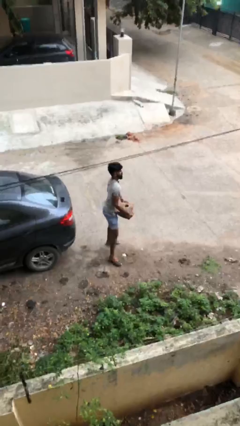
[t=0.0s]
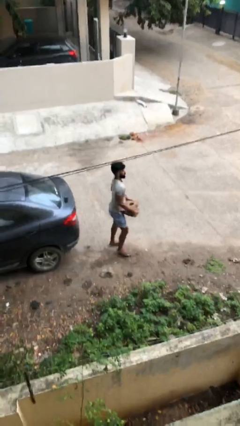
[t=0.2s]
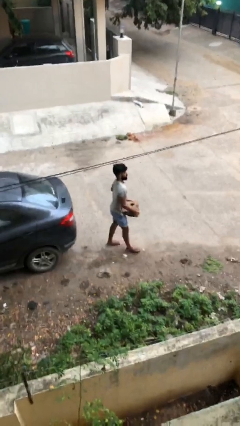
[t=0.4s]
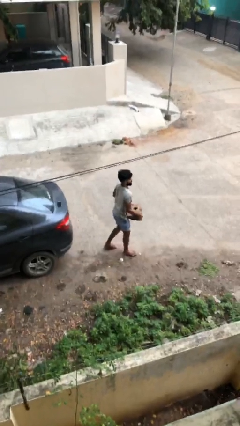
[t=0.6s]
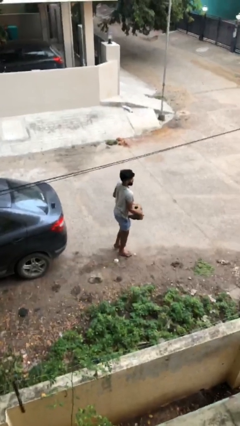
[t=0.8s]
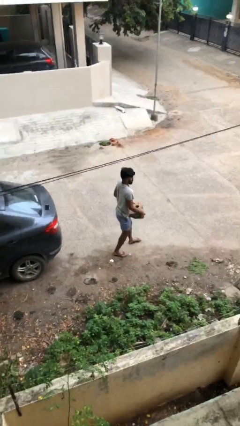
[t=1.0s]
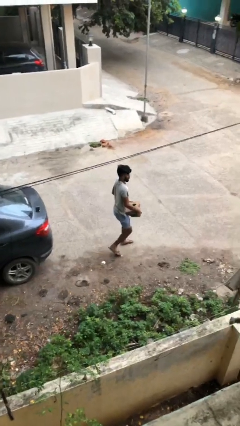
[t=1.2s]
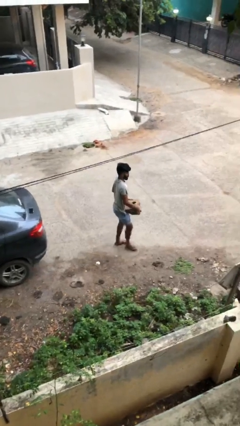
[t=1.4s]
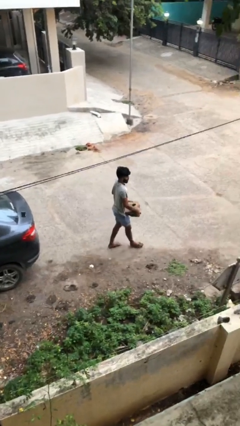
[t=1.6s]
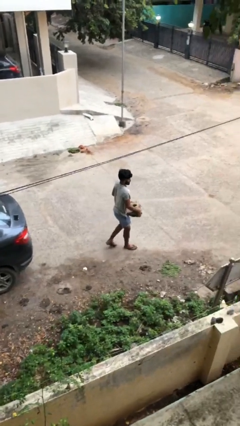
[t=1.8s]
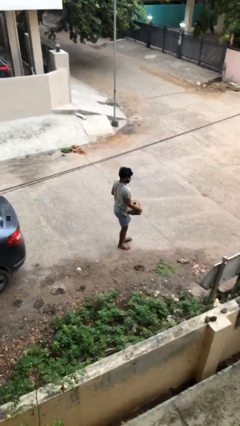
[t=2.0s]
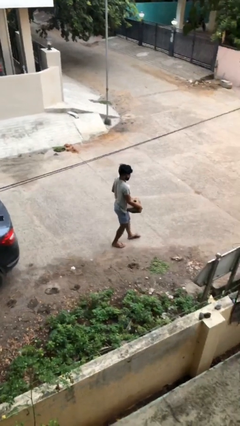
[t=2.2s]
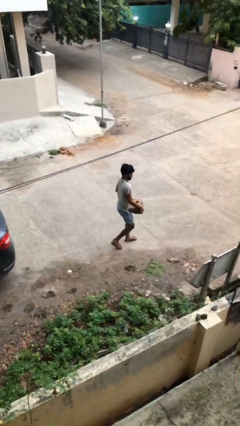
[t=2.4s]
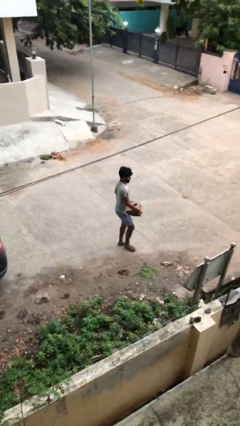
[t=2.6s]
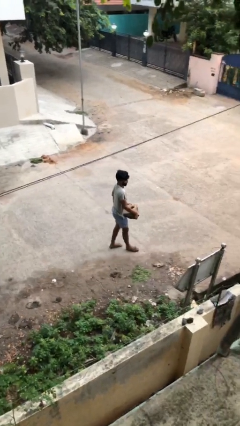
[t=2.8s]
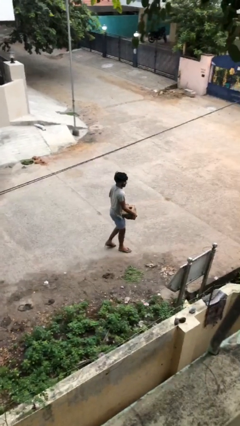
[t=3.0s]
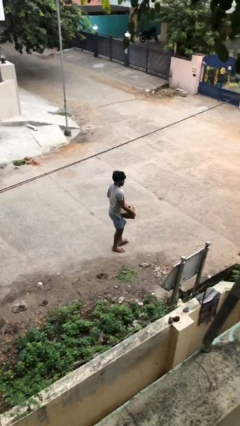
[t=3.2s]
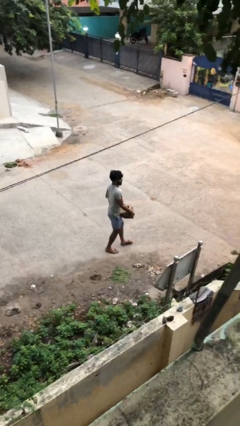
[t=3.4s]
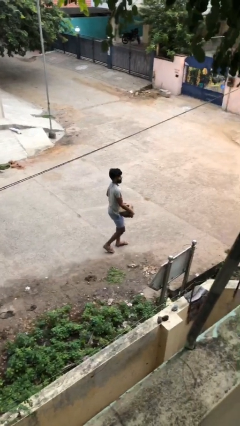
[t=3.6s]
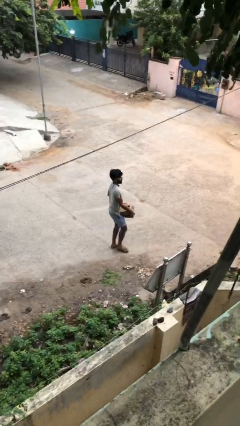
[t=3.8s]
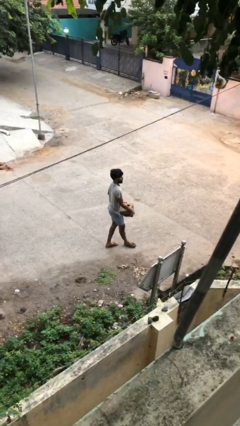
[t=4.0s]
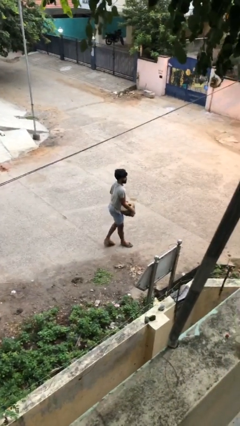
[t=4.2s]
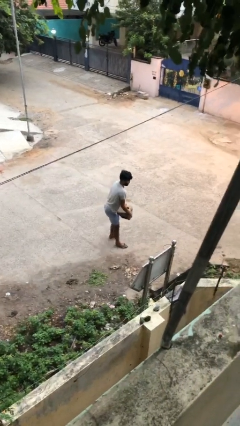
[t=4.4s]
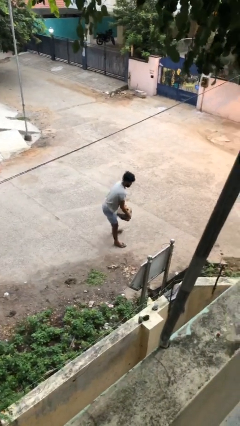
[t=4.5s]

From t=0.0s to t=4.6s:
person carries heavy object

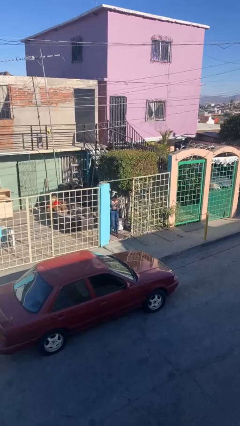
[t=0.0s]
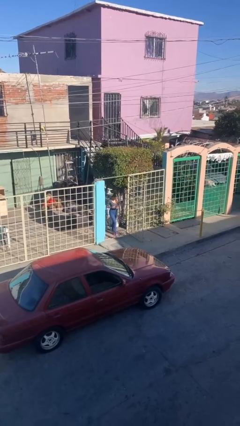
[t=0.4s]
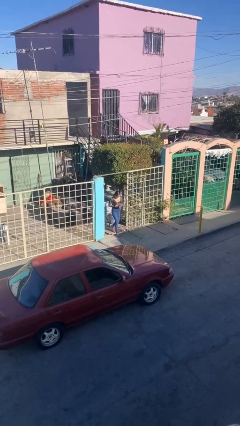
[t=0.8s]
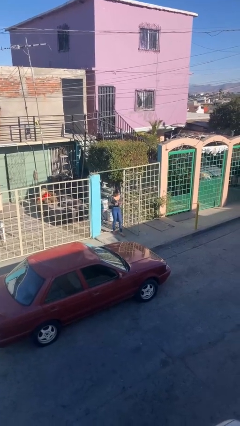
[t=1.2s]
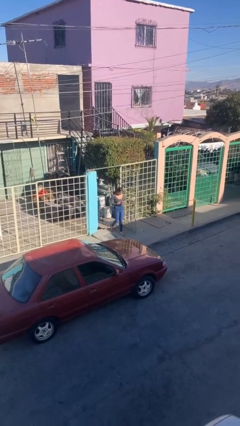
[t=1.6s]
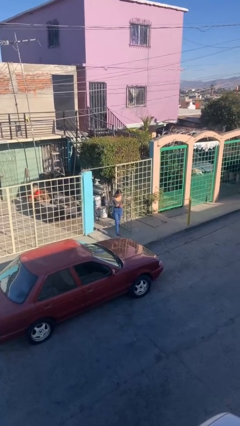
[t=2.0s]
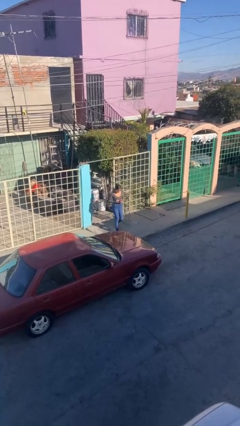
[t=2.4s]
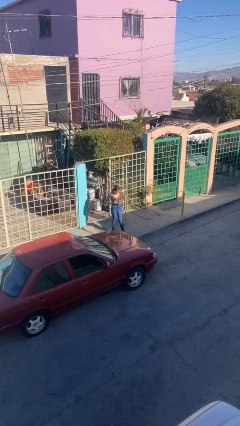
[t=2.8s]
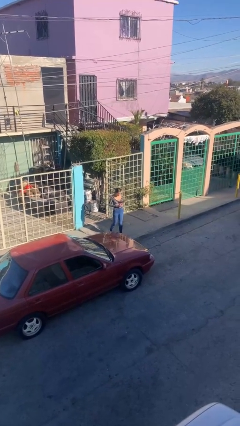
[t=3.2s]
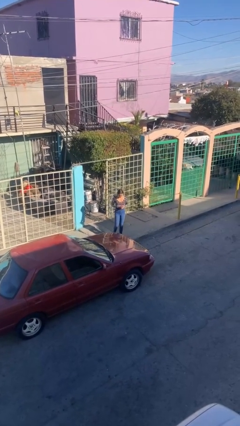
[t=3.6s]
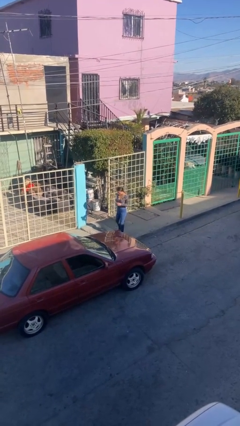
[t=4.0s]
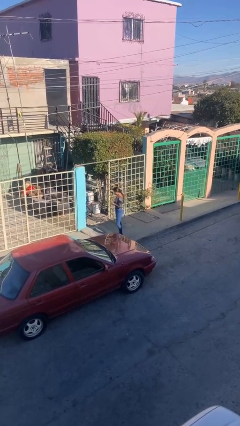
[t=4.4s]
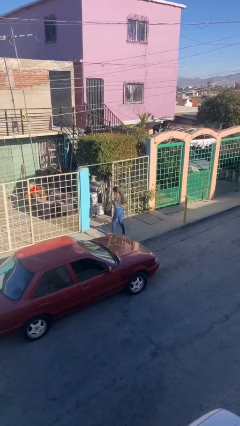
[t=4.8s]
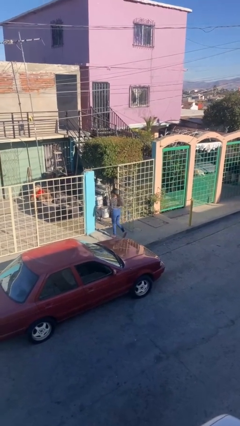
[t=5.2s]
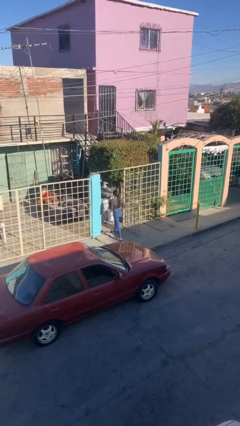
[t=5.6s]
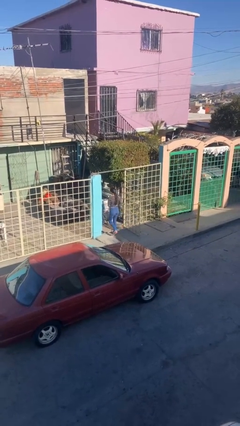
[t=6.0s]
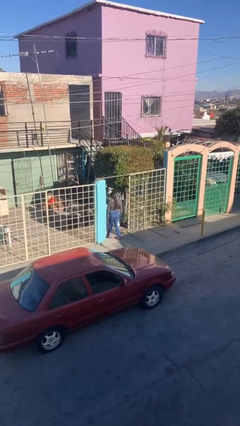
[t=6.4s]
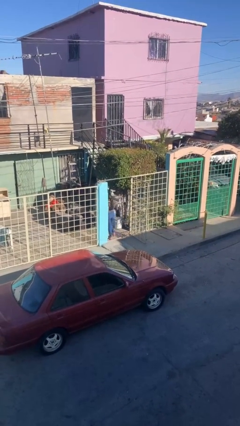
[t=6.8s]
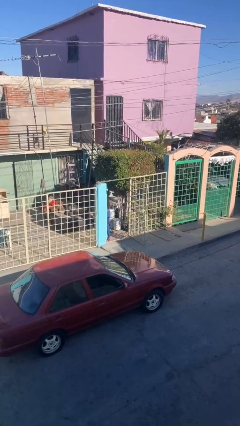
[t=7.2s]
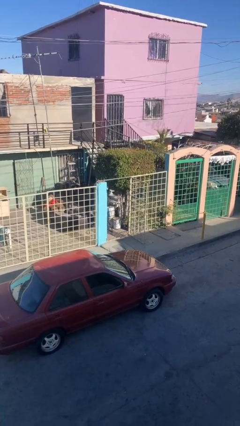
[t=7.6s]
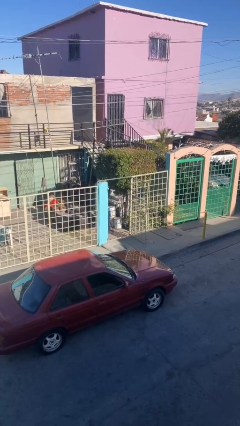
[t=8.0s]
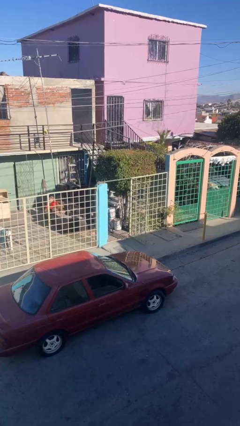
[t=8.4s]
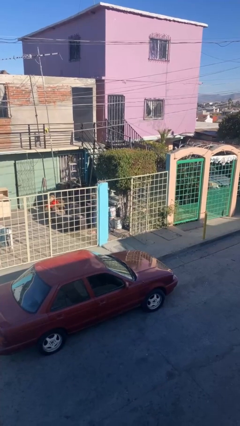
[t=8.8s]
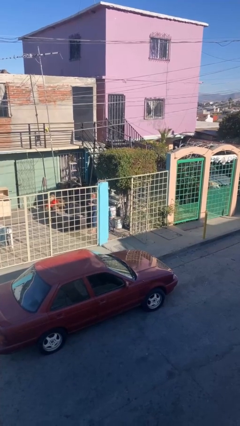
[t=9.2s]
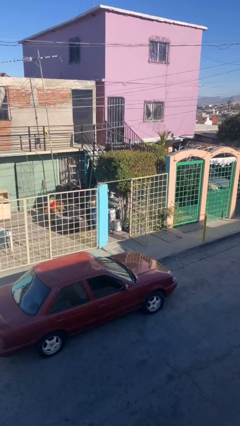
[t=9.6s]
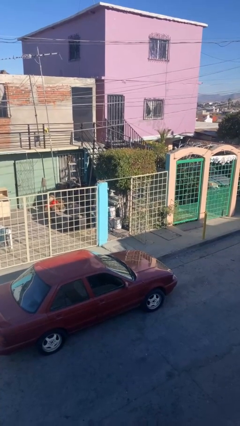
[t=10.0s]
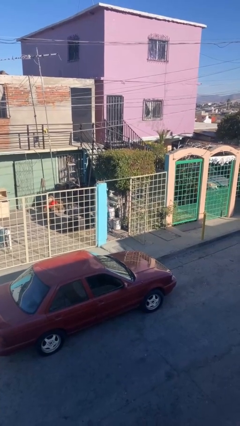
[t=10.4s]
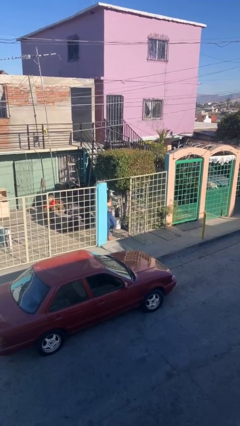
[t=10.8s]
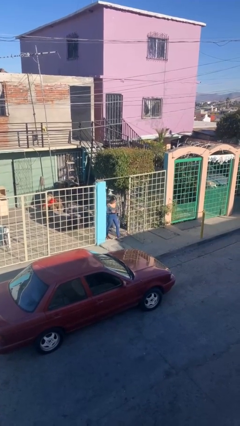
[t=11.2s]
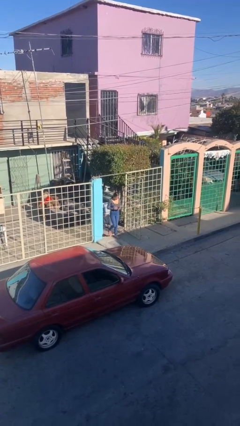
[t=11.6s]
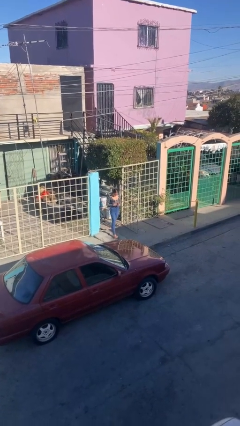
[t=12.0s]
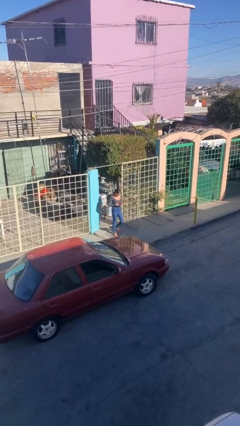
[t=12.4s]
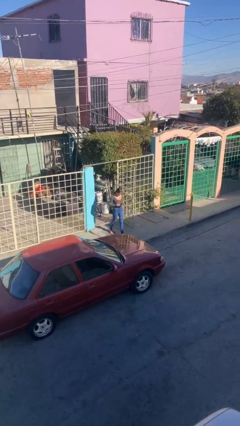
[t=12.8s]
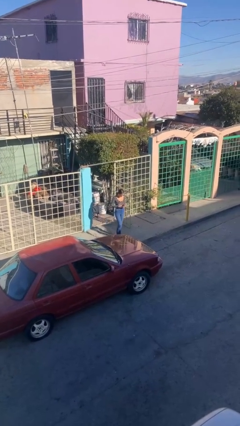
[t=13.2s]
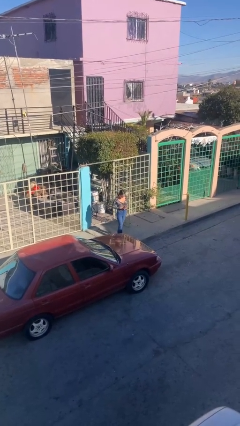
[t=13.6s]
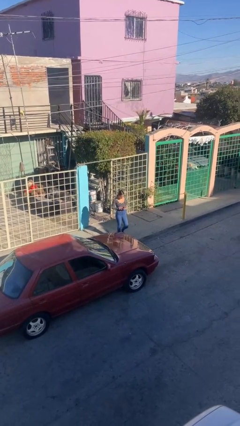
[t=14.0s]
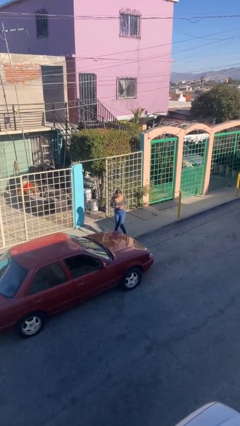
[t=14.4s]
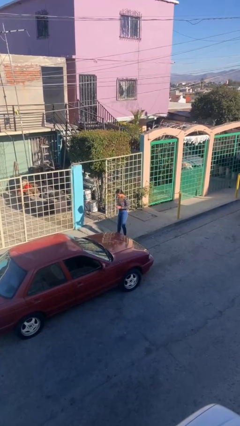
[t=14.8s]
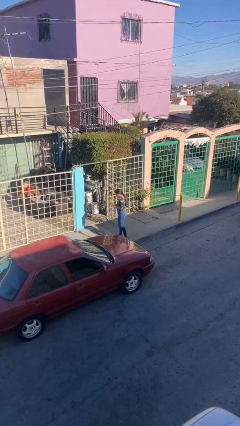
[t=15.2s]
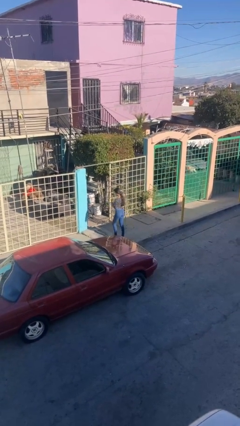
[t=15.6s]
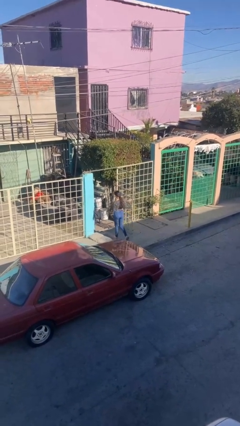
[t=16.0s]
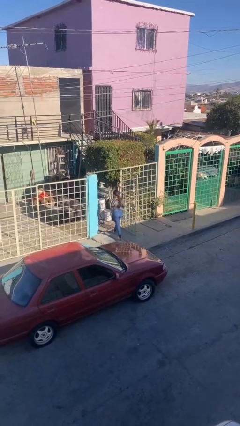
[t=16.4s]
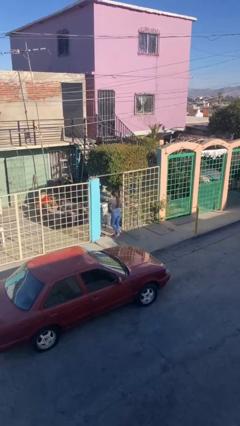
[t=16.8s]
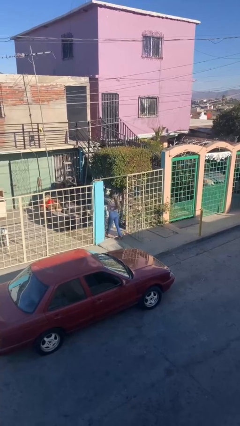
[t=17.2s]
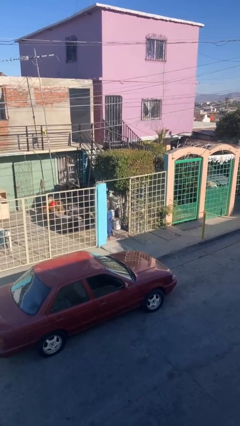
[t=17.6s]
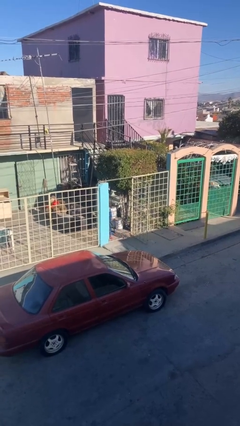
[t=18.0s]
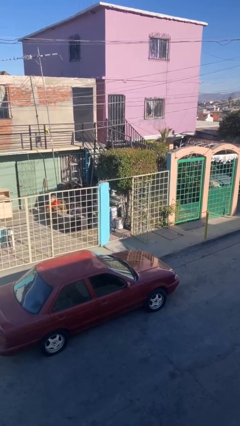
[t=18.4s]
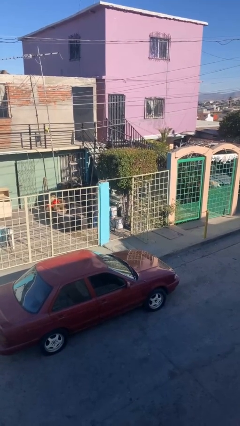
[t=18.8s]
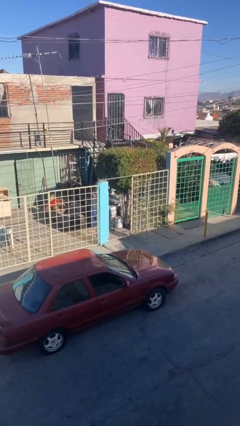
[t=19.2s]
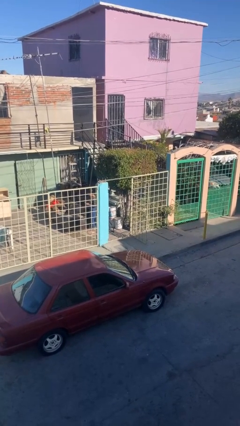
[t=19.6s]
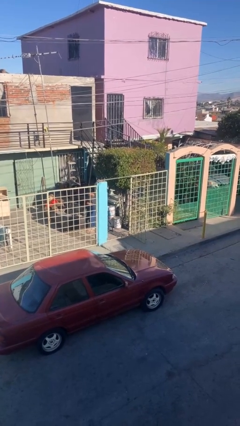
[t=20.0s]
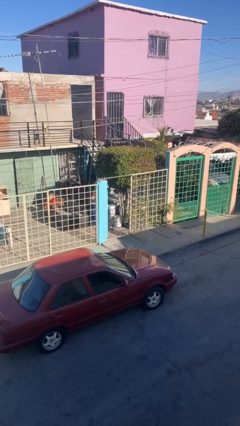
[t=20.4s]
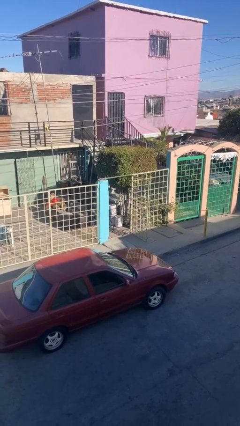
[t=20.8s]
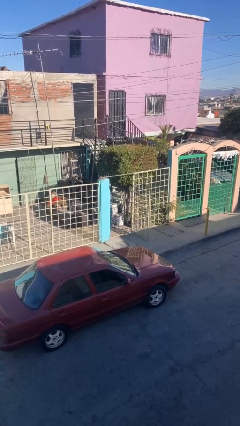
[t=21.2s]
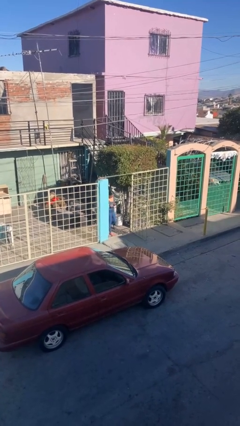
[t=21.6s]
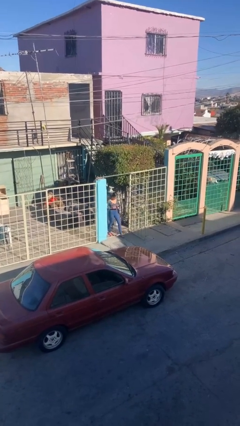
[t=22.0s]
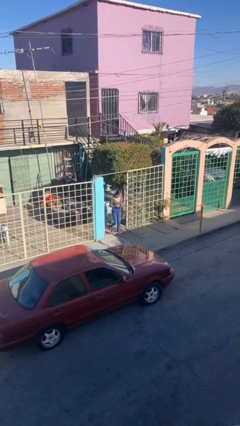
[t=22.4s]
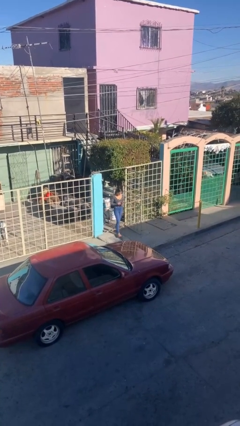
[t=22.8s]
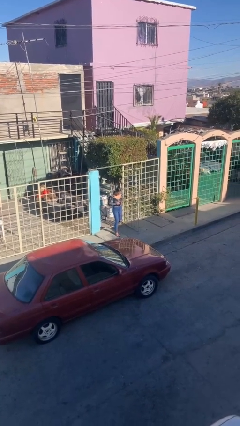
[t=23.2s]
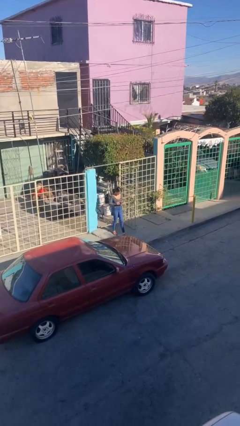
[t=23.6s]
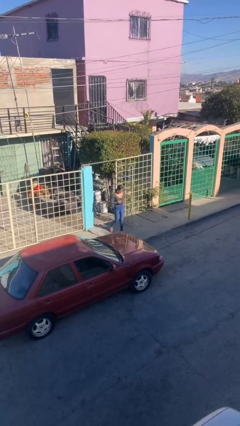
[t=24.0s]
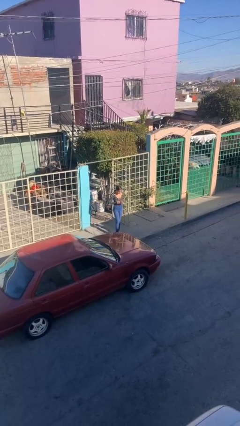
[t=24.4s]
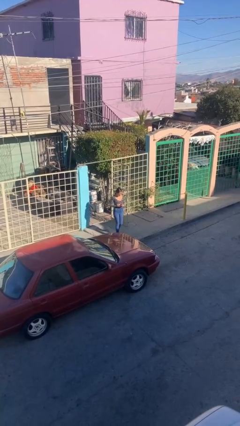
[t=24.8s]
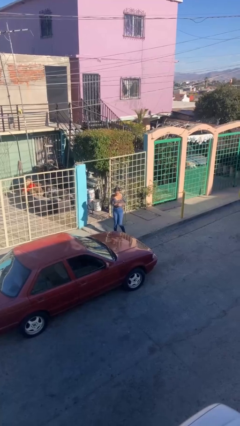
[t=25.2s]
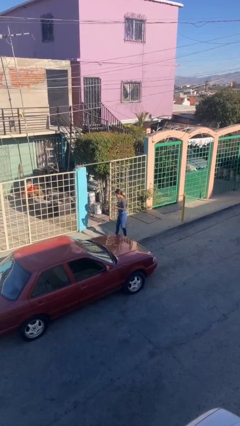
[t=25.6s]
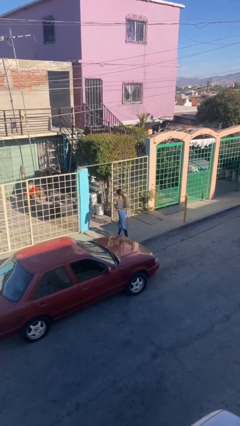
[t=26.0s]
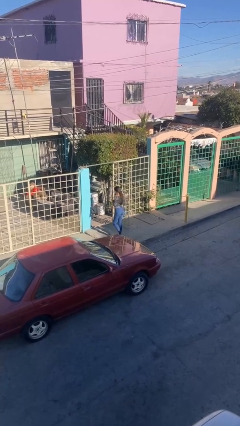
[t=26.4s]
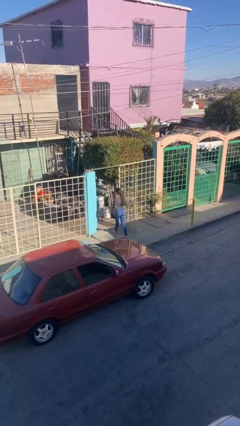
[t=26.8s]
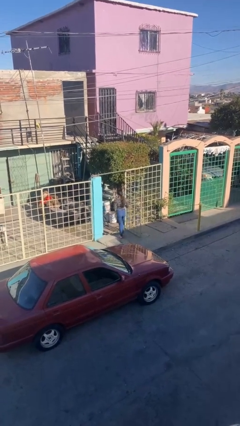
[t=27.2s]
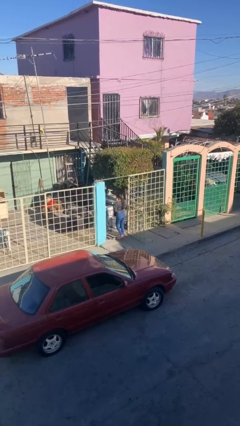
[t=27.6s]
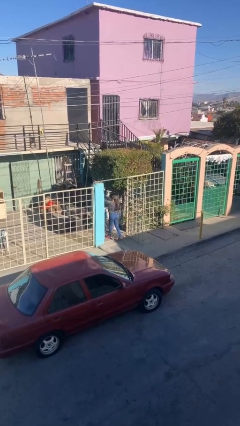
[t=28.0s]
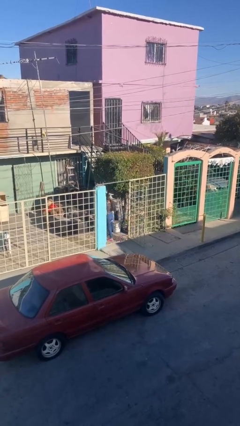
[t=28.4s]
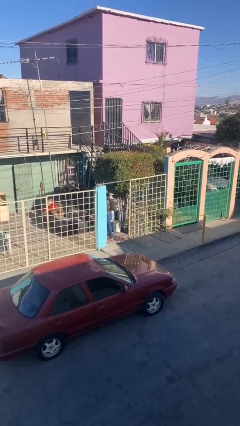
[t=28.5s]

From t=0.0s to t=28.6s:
person texts on phone
